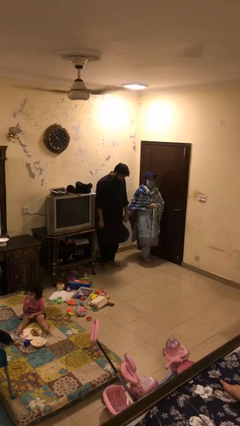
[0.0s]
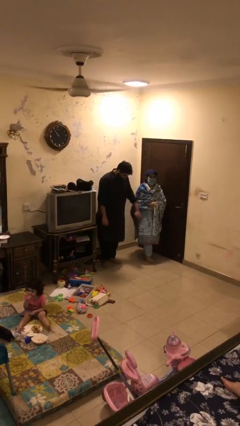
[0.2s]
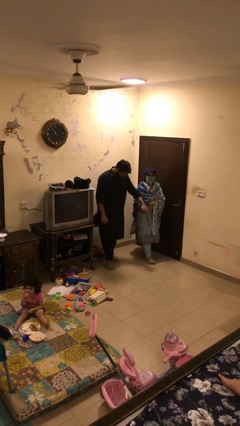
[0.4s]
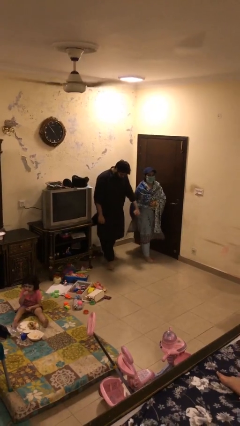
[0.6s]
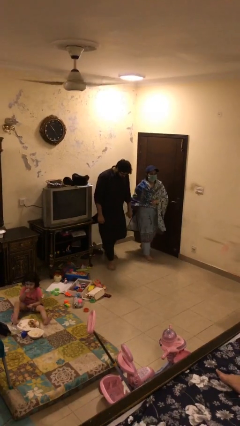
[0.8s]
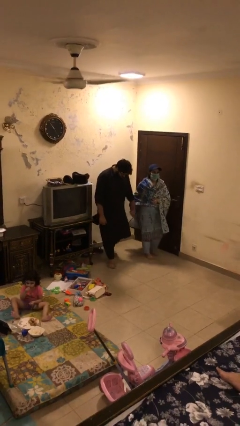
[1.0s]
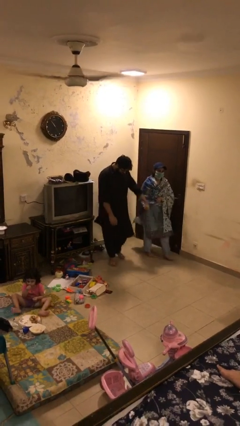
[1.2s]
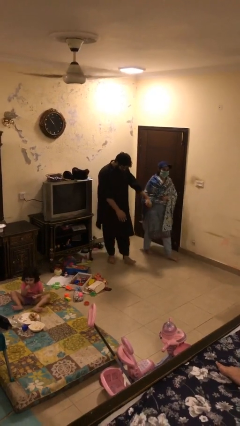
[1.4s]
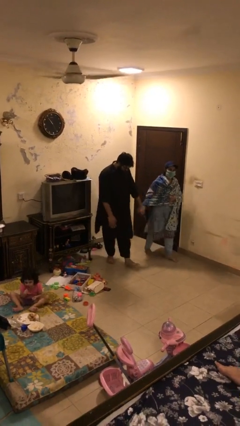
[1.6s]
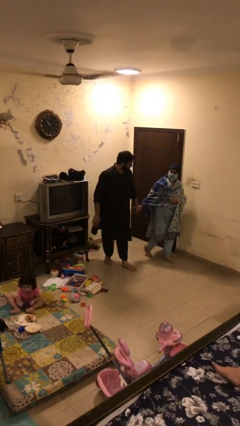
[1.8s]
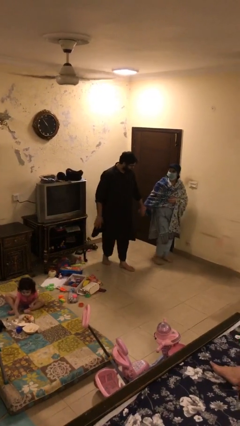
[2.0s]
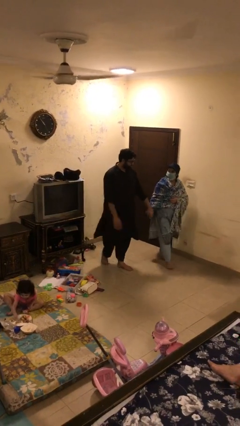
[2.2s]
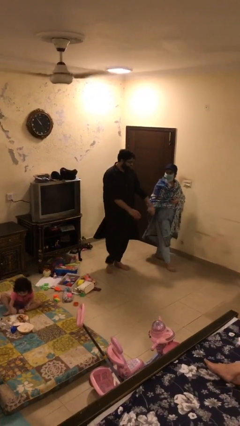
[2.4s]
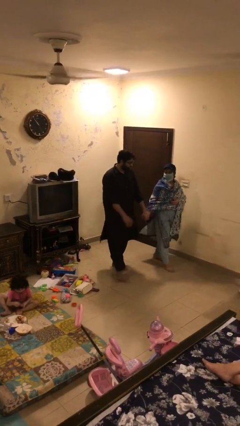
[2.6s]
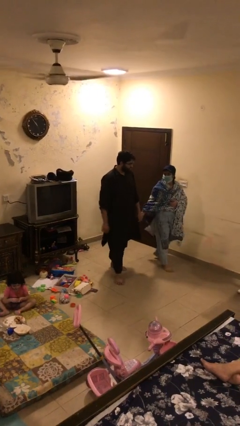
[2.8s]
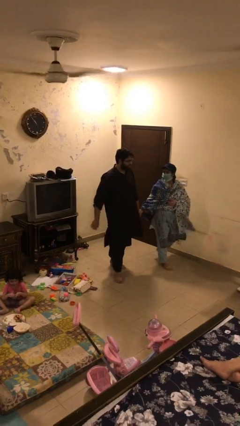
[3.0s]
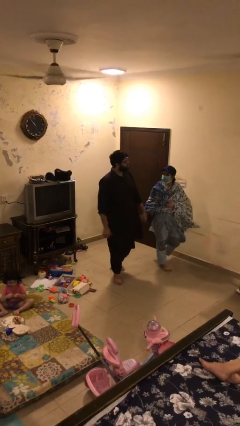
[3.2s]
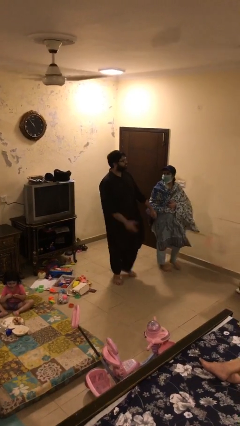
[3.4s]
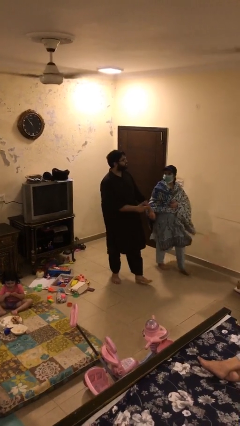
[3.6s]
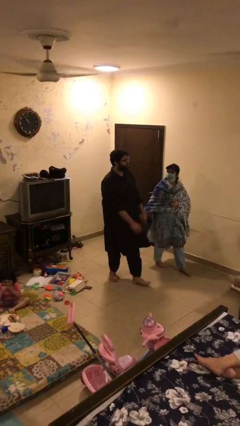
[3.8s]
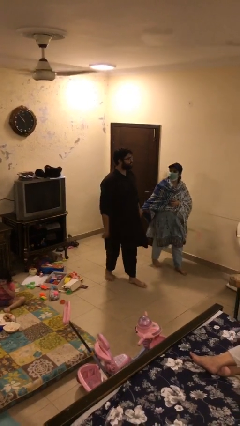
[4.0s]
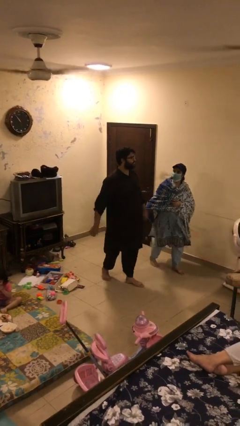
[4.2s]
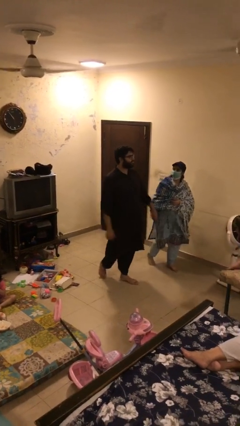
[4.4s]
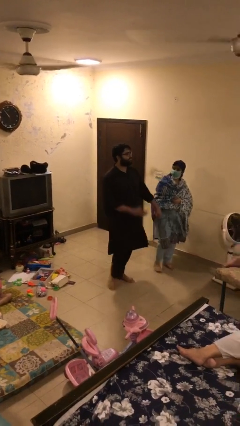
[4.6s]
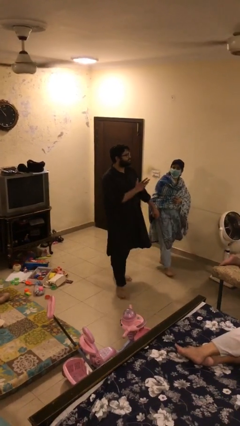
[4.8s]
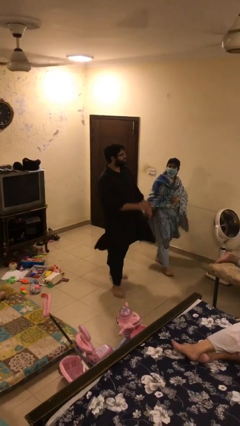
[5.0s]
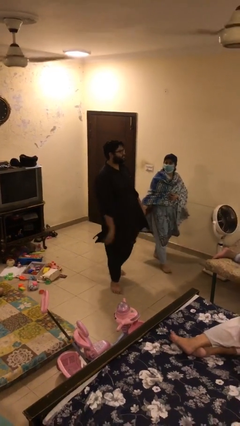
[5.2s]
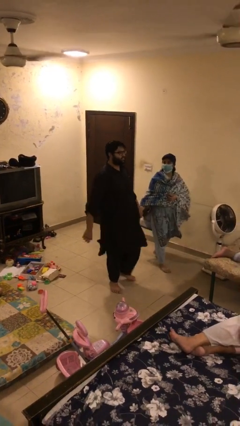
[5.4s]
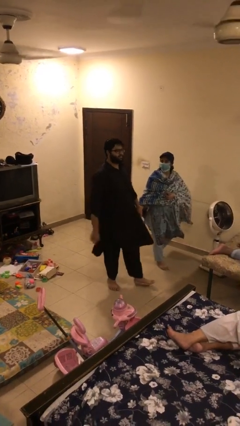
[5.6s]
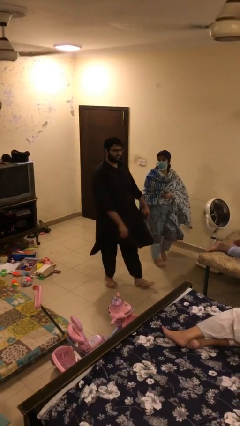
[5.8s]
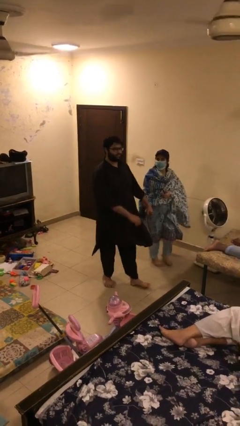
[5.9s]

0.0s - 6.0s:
person holds hand

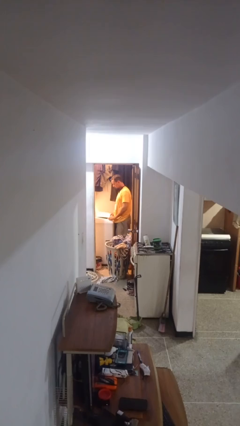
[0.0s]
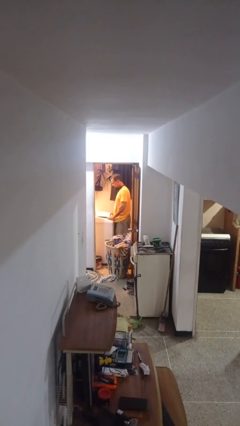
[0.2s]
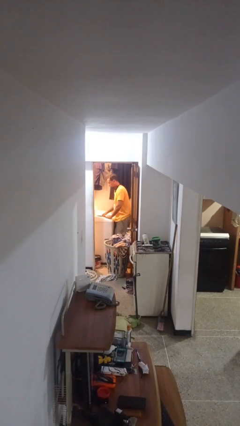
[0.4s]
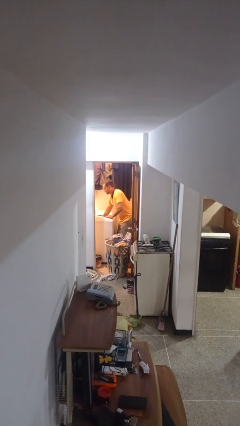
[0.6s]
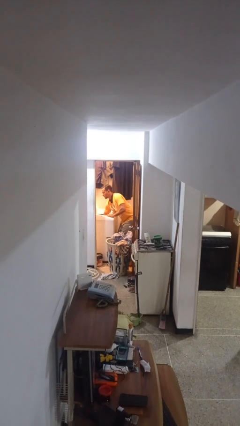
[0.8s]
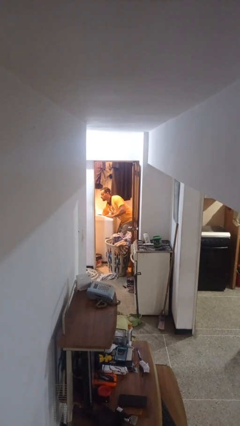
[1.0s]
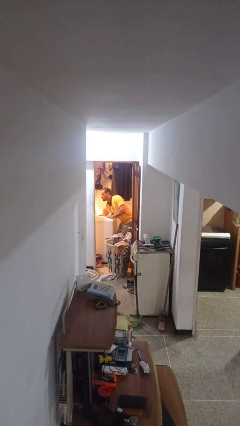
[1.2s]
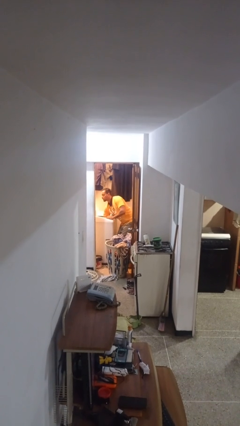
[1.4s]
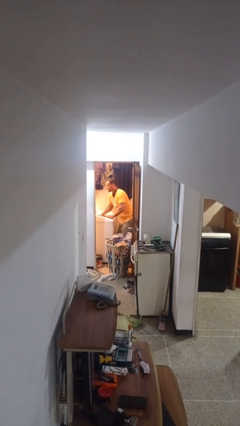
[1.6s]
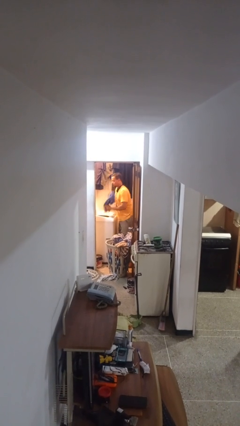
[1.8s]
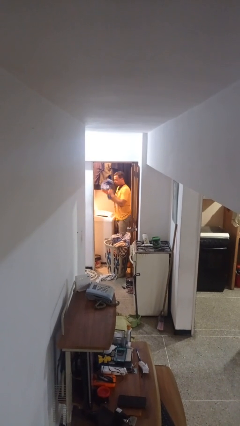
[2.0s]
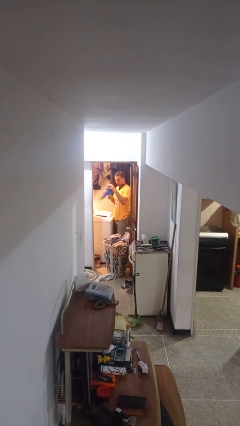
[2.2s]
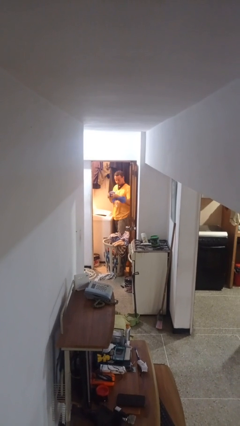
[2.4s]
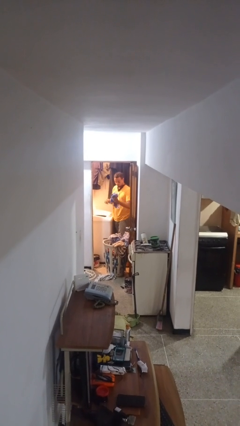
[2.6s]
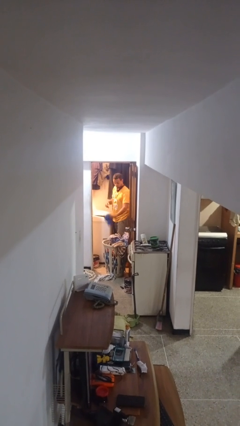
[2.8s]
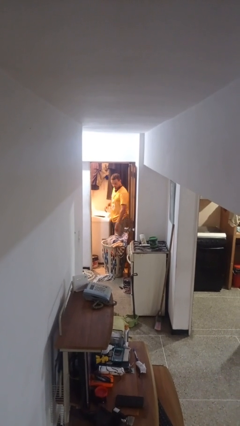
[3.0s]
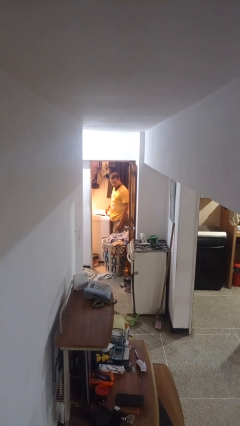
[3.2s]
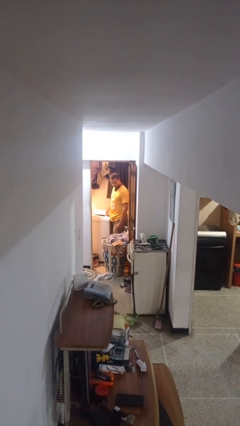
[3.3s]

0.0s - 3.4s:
person loads clotheswasher

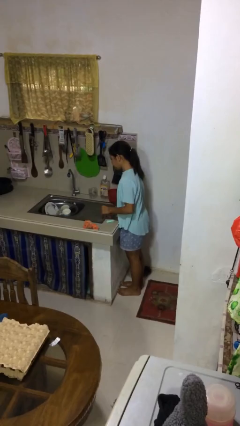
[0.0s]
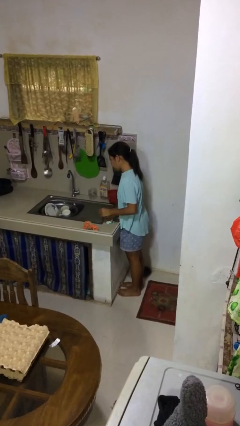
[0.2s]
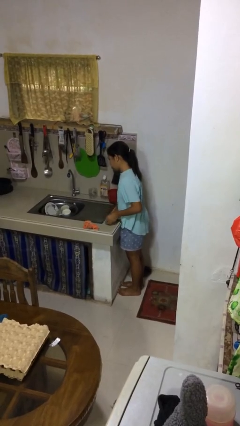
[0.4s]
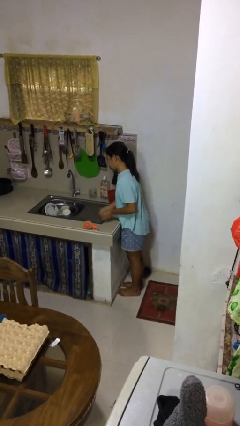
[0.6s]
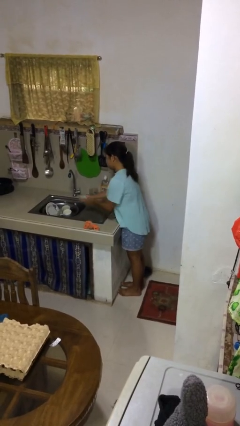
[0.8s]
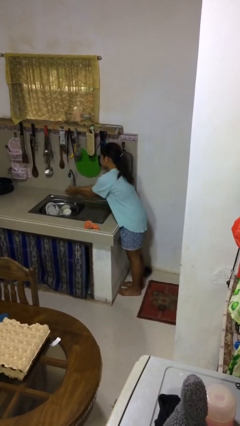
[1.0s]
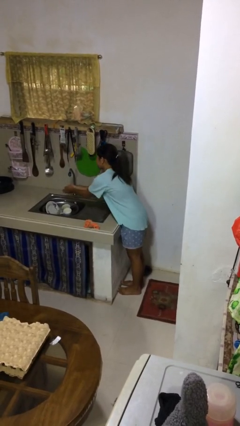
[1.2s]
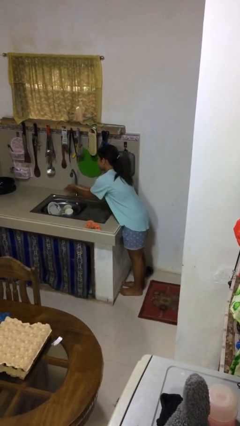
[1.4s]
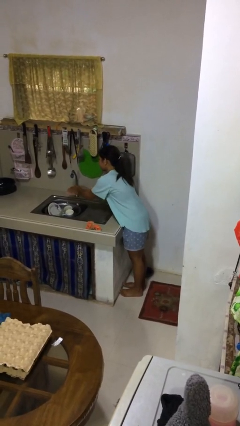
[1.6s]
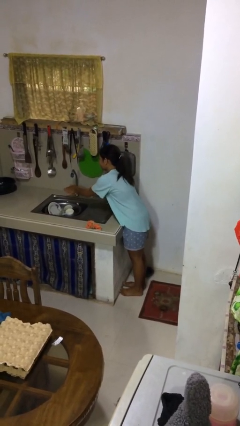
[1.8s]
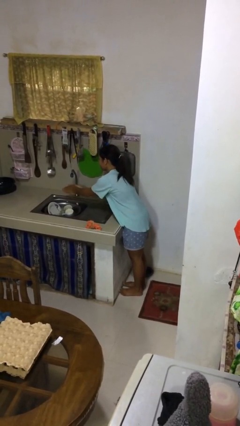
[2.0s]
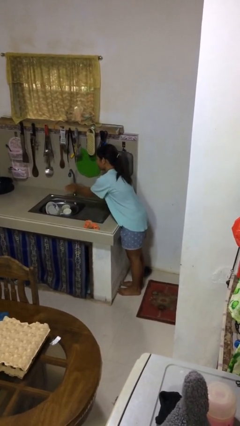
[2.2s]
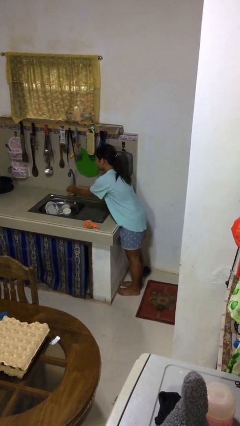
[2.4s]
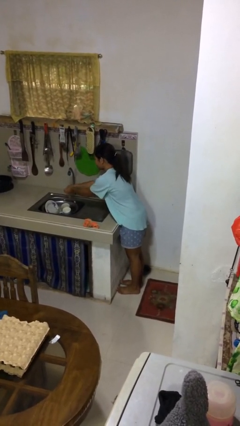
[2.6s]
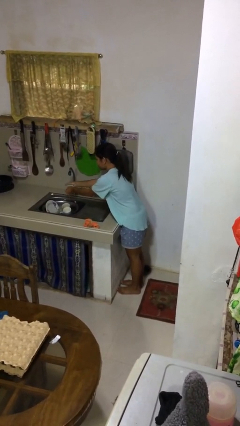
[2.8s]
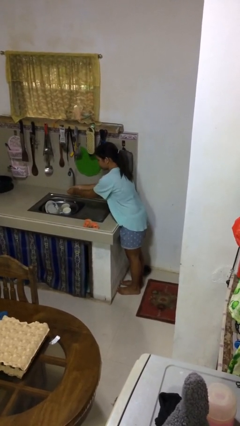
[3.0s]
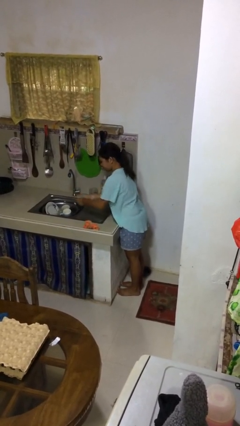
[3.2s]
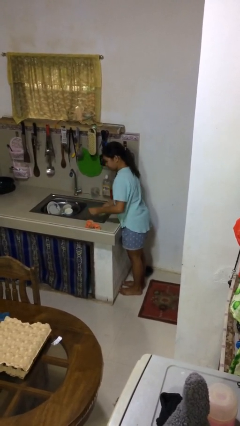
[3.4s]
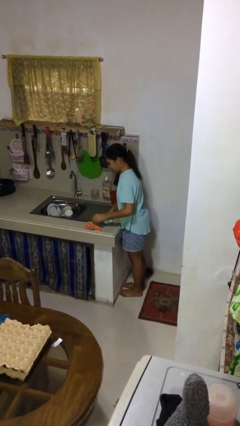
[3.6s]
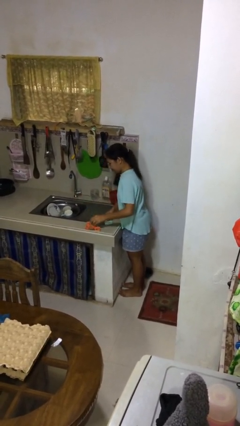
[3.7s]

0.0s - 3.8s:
person washes hands

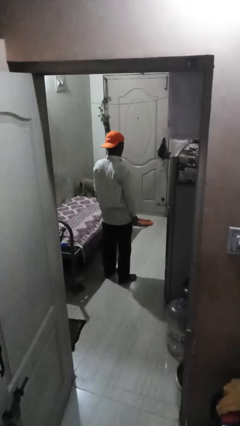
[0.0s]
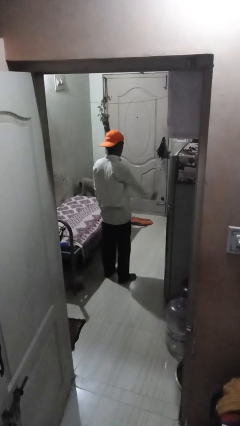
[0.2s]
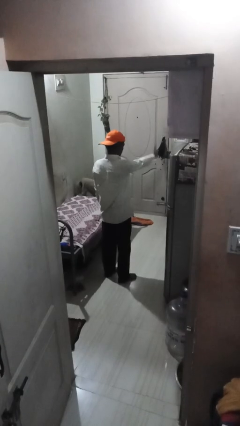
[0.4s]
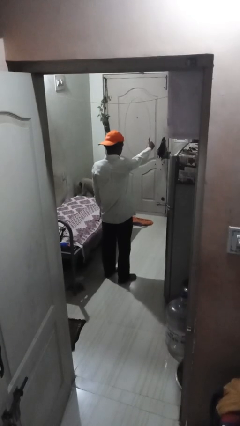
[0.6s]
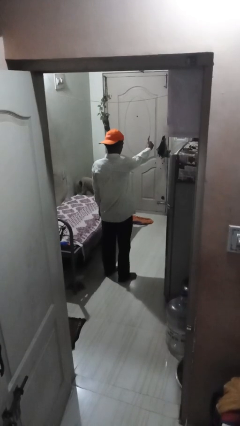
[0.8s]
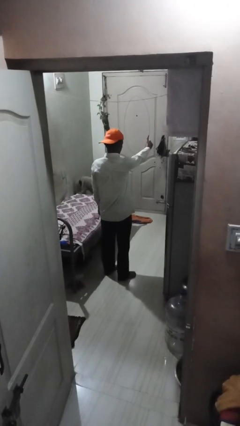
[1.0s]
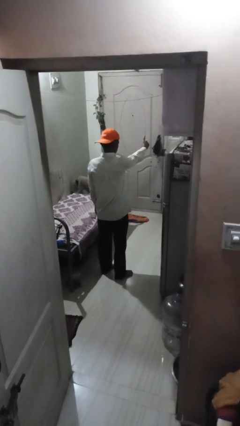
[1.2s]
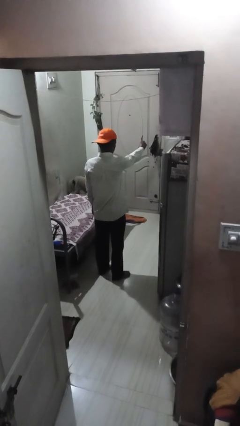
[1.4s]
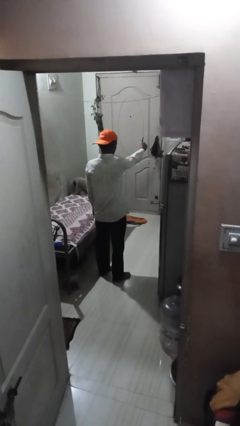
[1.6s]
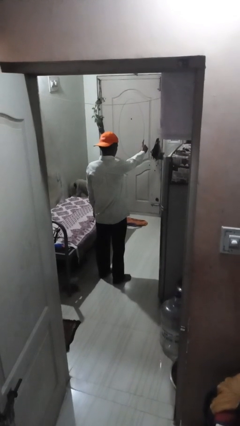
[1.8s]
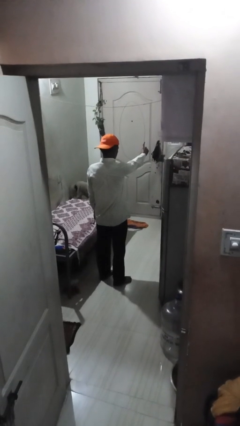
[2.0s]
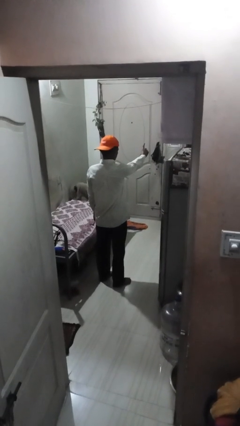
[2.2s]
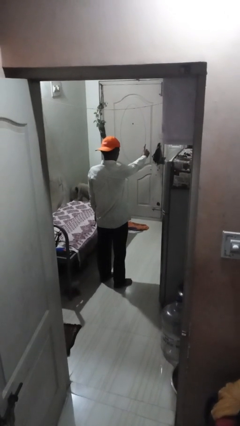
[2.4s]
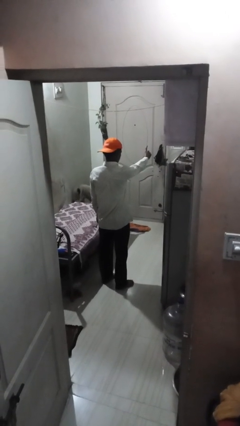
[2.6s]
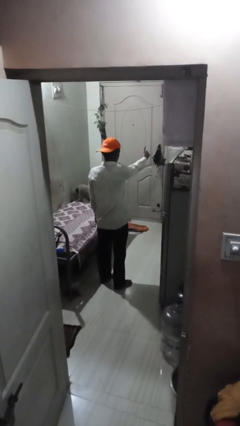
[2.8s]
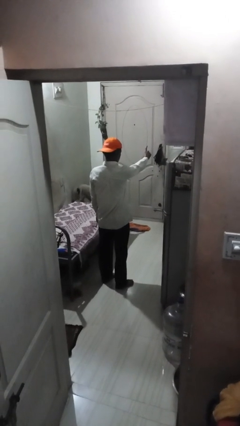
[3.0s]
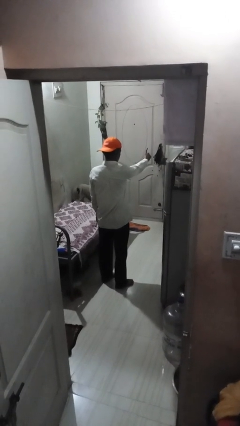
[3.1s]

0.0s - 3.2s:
person points at person

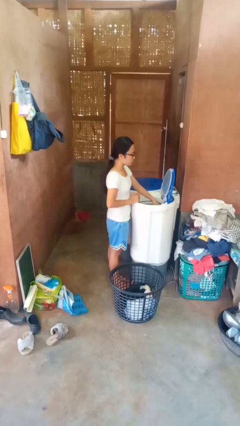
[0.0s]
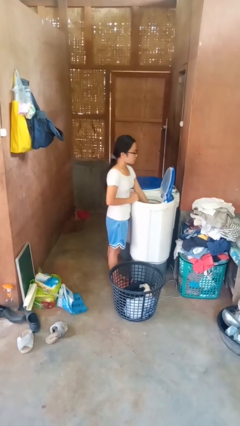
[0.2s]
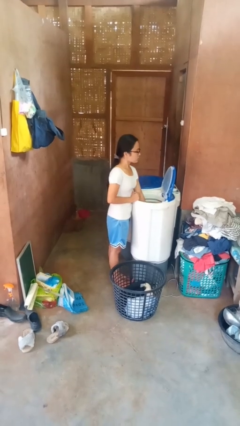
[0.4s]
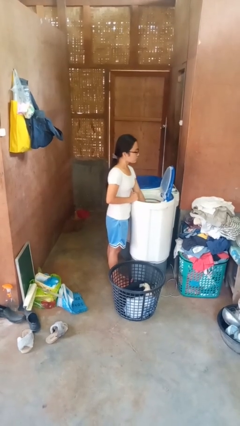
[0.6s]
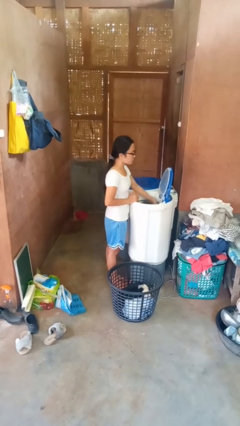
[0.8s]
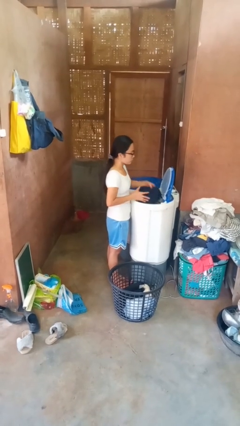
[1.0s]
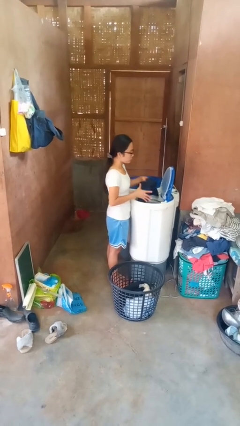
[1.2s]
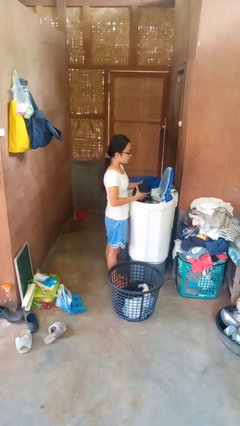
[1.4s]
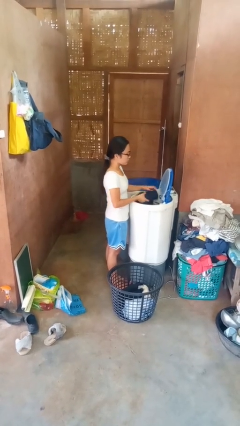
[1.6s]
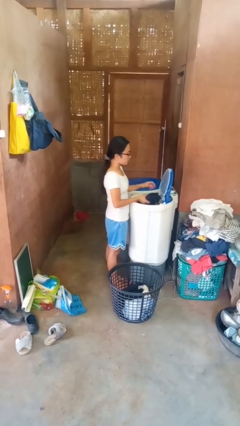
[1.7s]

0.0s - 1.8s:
person unloads dryer
